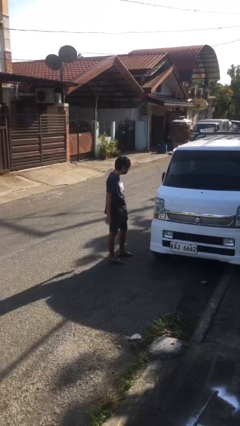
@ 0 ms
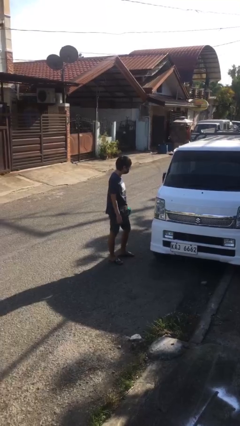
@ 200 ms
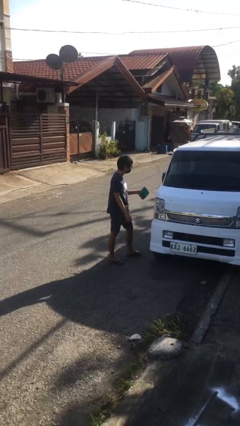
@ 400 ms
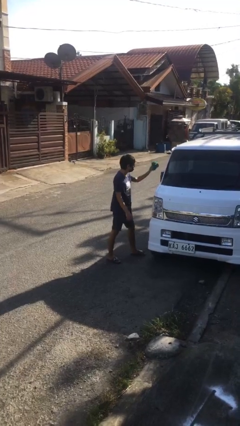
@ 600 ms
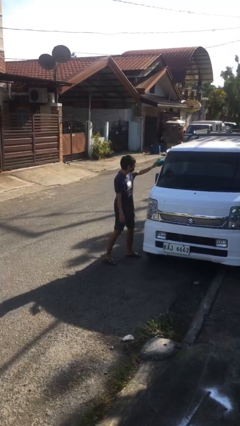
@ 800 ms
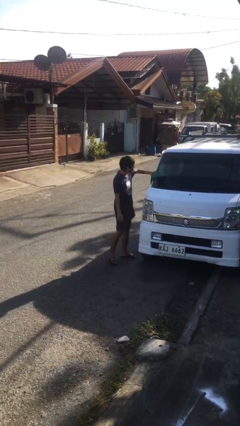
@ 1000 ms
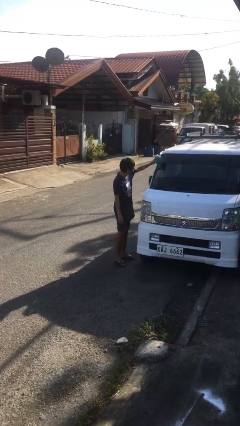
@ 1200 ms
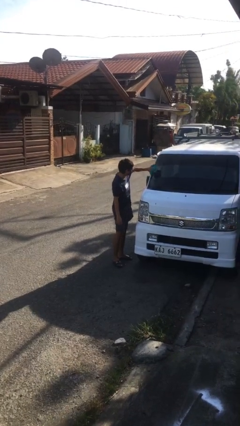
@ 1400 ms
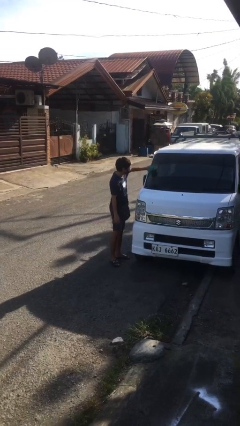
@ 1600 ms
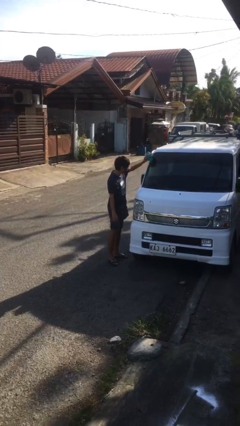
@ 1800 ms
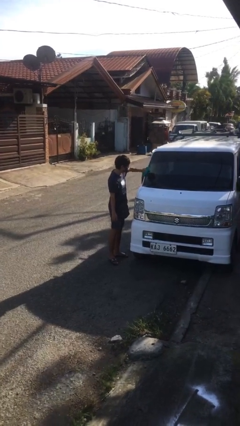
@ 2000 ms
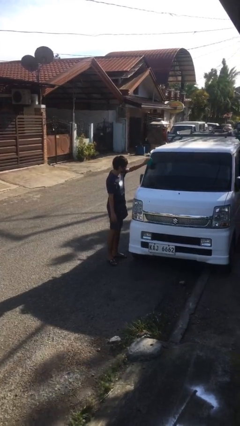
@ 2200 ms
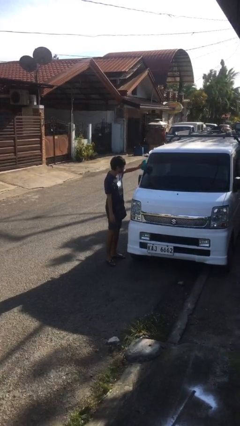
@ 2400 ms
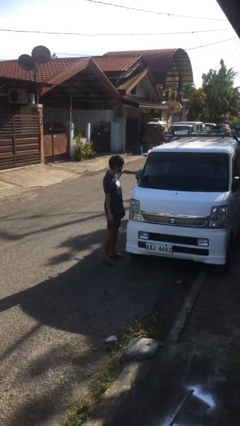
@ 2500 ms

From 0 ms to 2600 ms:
person polishes car with rag

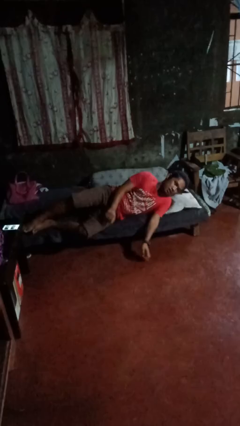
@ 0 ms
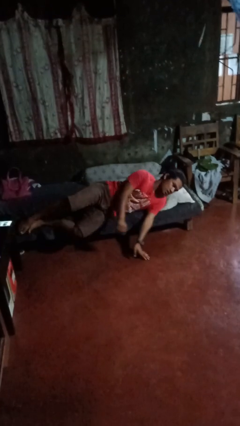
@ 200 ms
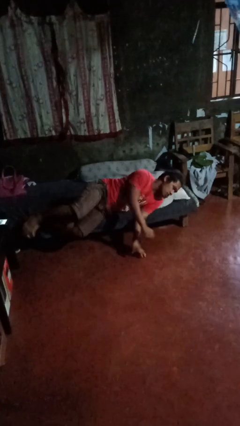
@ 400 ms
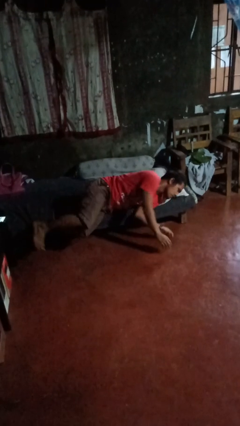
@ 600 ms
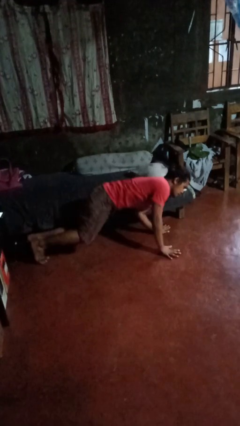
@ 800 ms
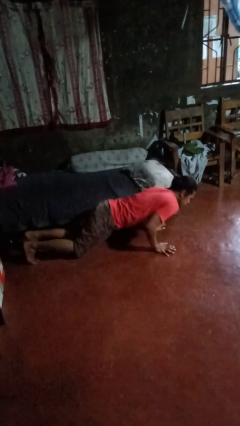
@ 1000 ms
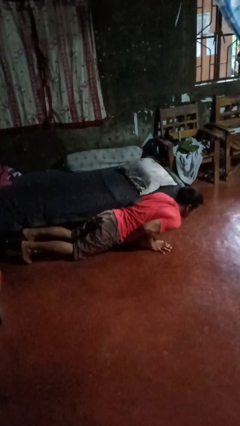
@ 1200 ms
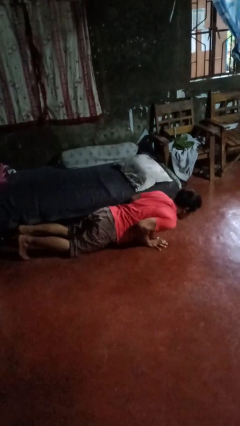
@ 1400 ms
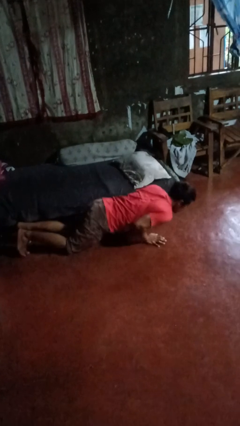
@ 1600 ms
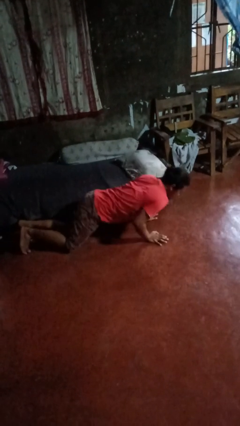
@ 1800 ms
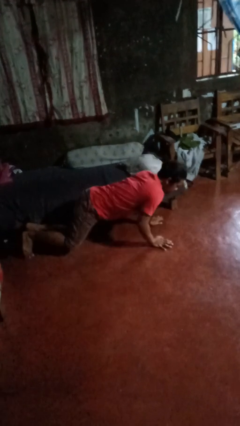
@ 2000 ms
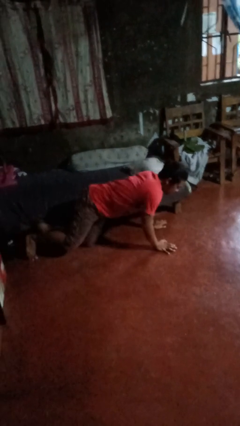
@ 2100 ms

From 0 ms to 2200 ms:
person falls from bed

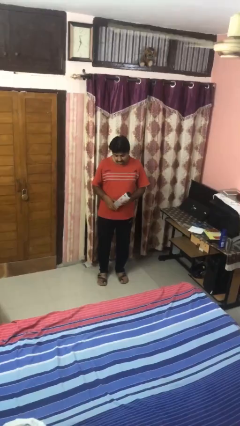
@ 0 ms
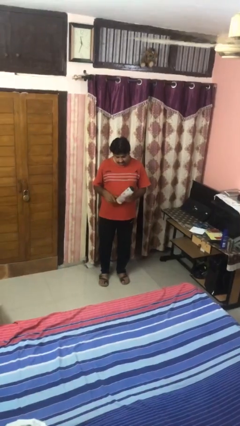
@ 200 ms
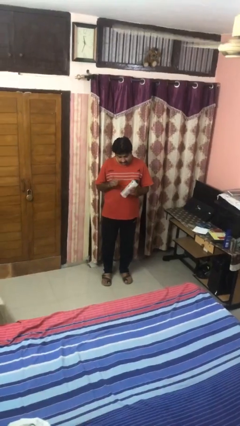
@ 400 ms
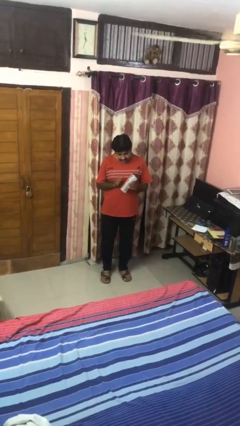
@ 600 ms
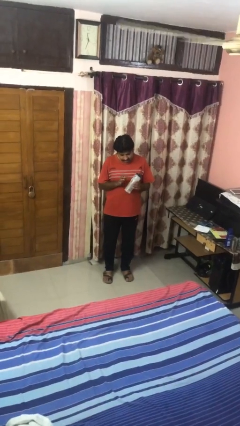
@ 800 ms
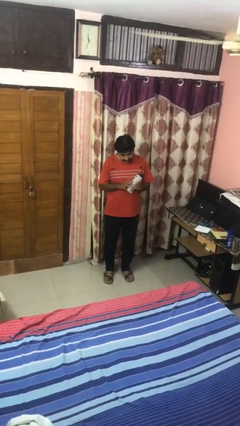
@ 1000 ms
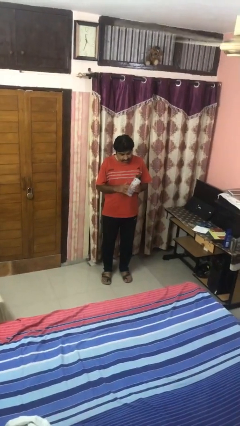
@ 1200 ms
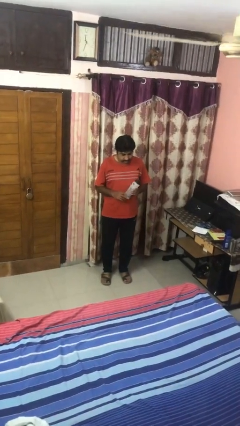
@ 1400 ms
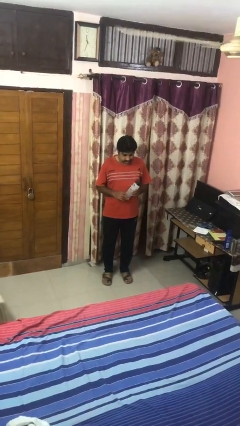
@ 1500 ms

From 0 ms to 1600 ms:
person taps object with finger

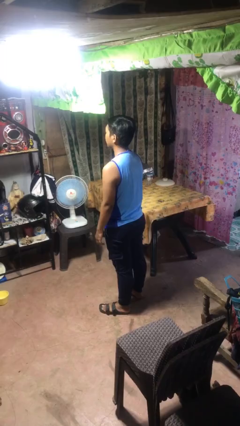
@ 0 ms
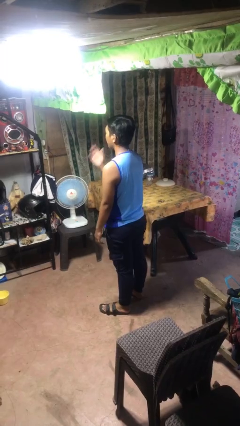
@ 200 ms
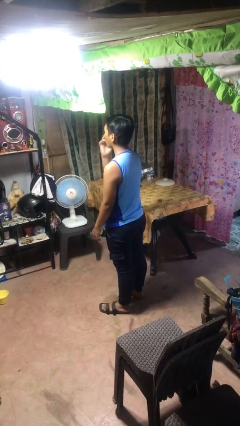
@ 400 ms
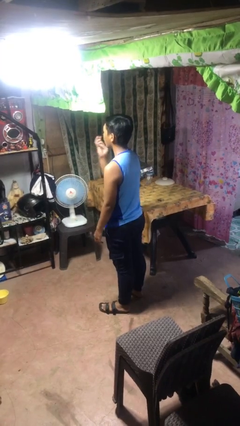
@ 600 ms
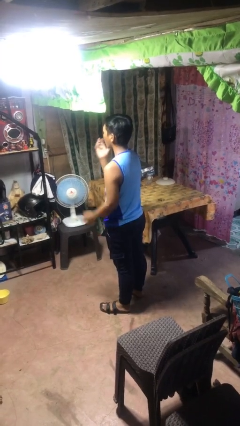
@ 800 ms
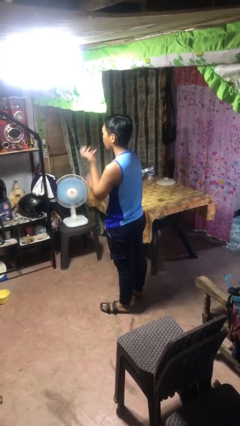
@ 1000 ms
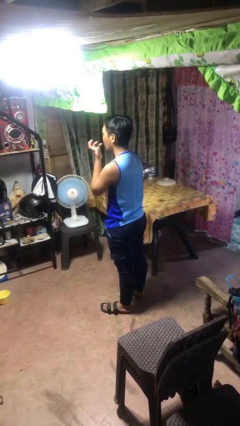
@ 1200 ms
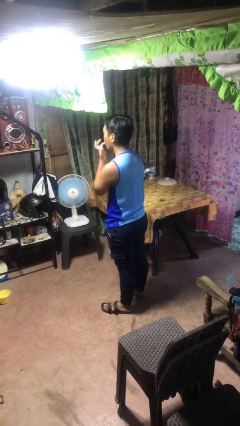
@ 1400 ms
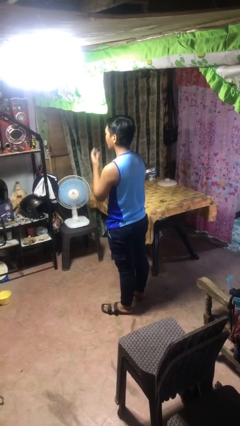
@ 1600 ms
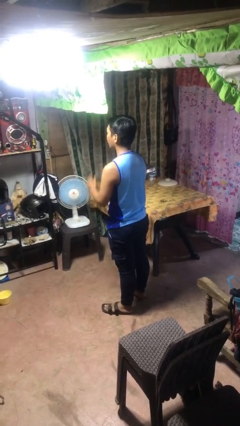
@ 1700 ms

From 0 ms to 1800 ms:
person licks fingers

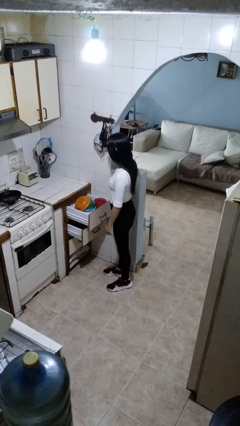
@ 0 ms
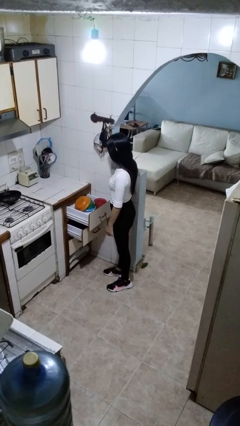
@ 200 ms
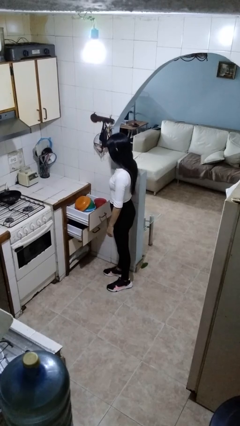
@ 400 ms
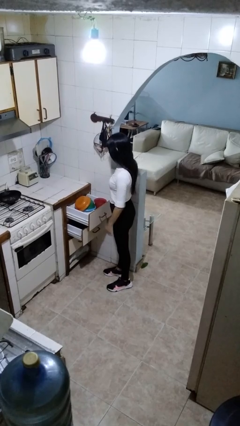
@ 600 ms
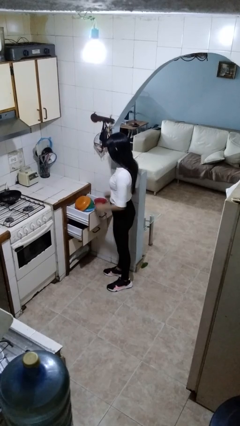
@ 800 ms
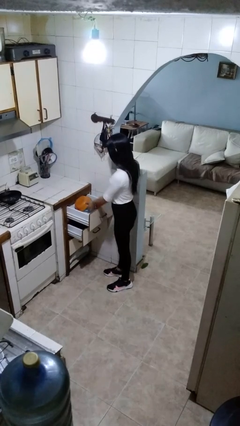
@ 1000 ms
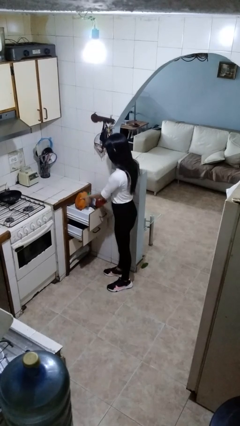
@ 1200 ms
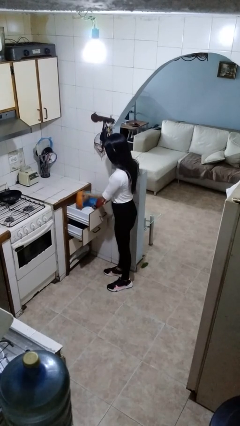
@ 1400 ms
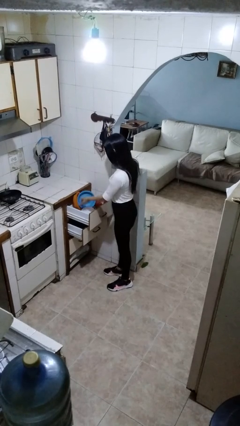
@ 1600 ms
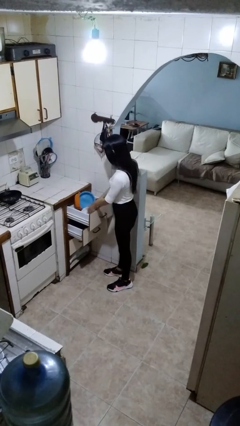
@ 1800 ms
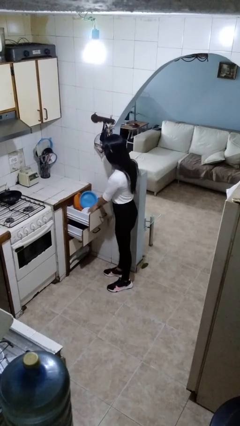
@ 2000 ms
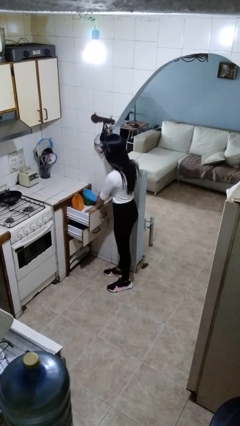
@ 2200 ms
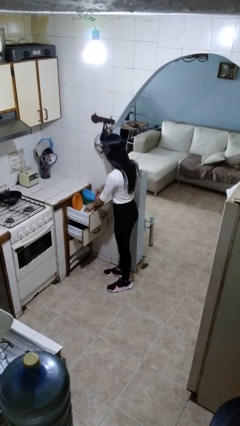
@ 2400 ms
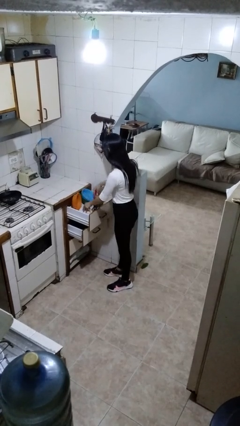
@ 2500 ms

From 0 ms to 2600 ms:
person searches in kitchen drawer

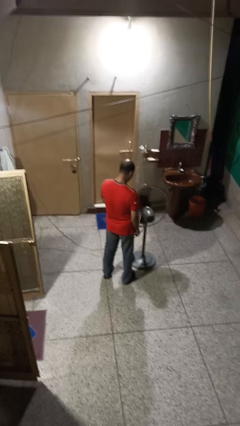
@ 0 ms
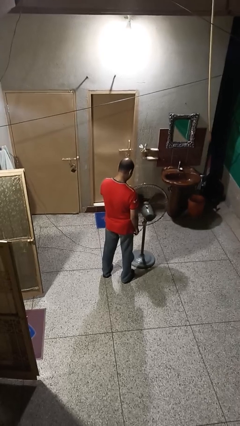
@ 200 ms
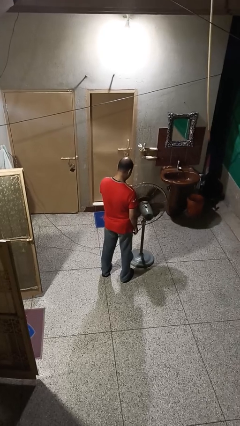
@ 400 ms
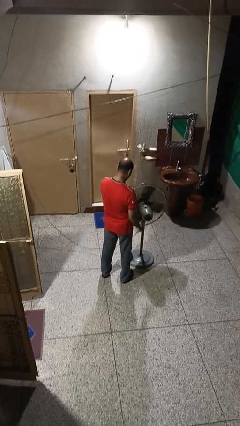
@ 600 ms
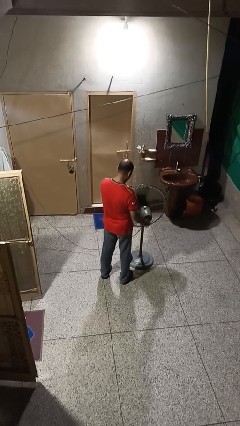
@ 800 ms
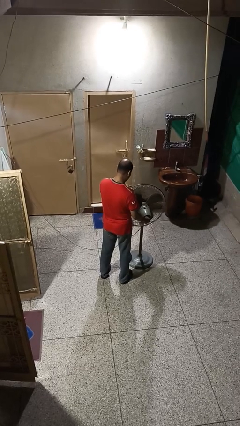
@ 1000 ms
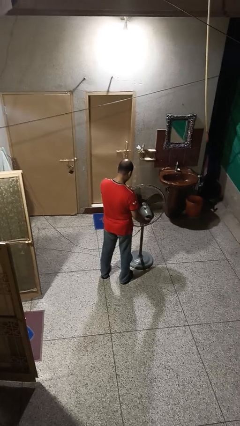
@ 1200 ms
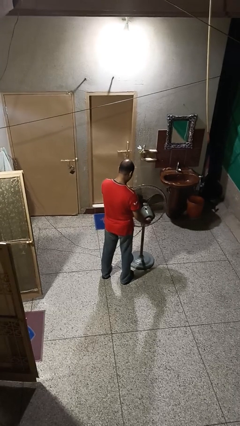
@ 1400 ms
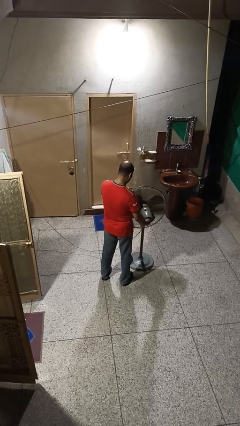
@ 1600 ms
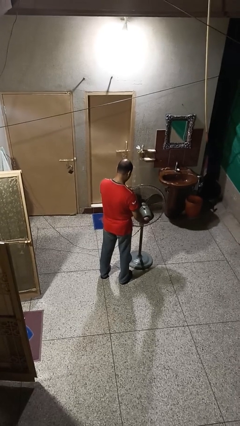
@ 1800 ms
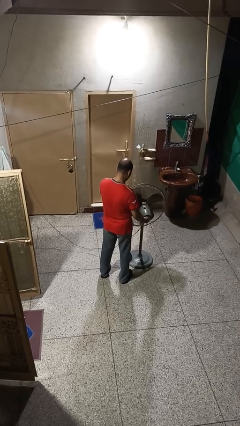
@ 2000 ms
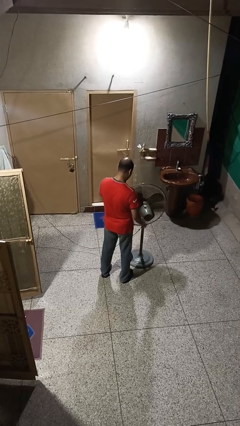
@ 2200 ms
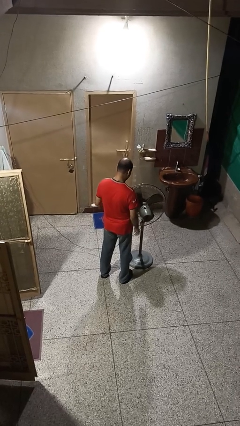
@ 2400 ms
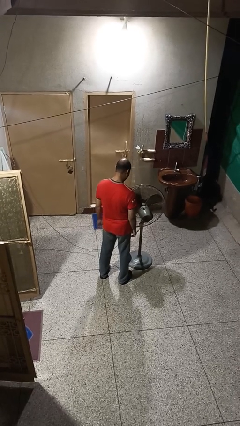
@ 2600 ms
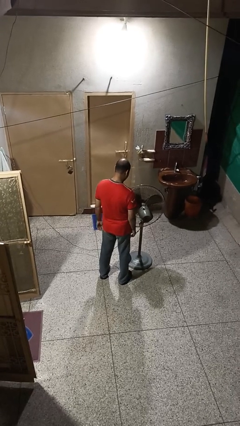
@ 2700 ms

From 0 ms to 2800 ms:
person turns off fan

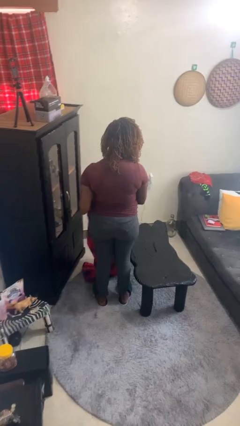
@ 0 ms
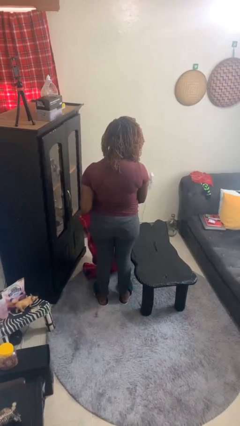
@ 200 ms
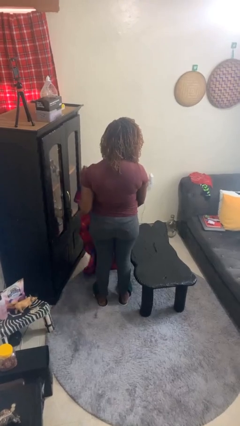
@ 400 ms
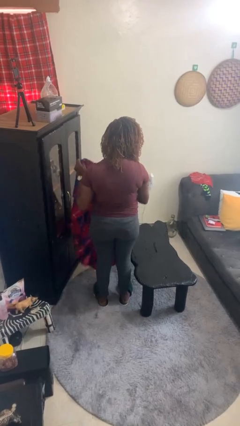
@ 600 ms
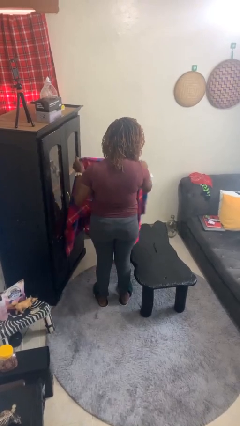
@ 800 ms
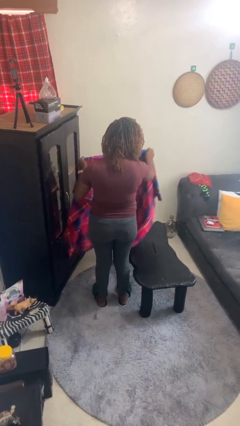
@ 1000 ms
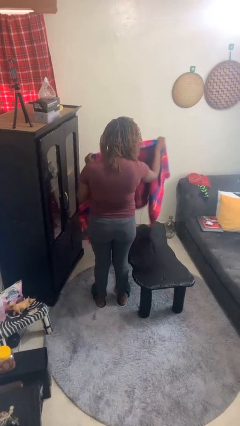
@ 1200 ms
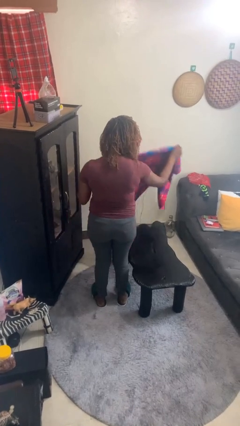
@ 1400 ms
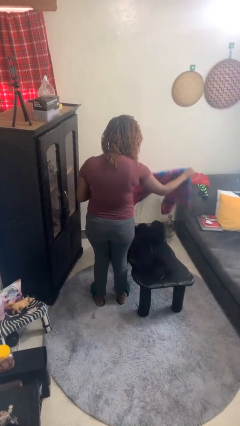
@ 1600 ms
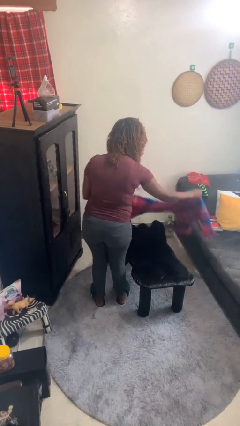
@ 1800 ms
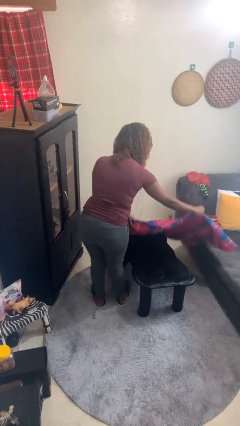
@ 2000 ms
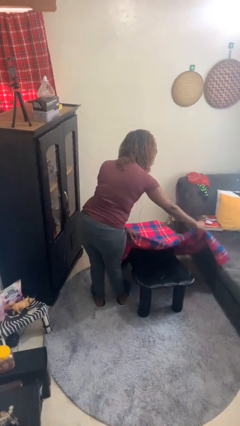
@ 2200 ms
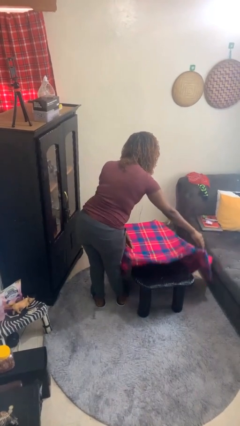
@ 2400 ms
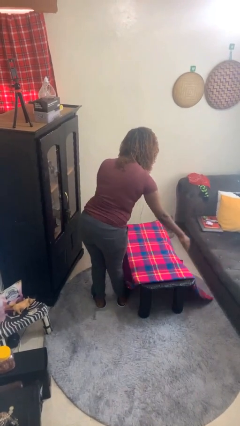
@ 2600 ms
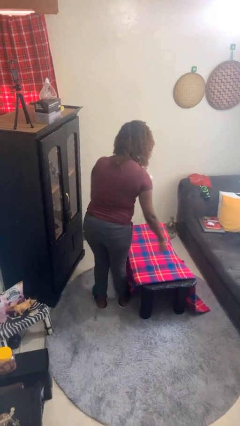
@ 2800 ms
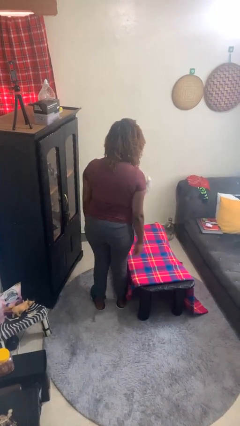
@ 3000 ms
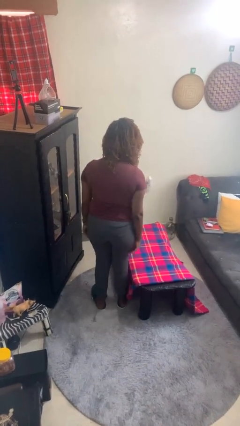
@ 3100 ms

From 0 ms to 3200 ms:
person spreads tablecloth

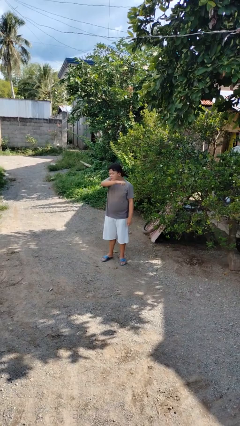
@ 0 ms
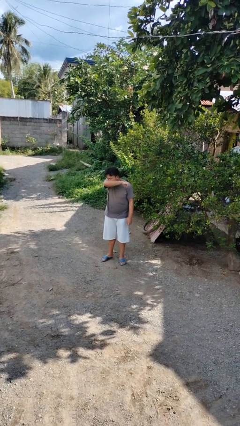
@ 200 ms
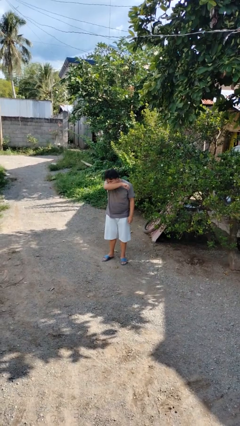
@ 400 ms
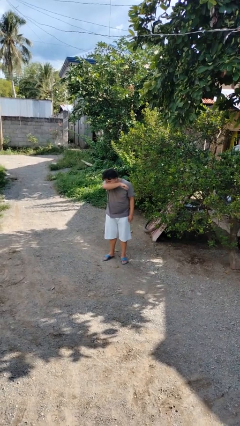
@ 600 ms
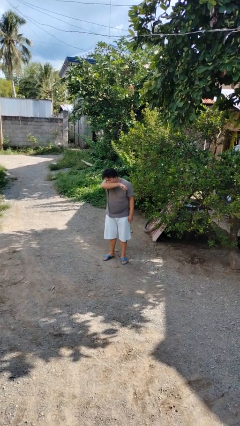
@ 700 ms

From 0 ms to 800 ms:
person sneezes into arm
